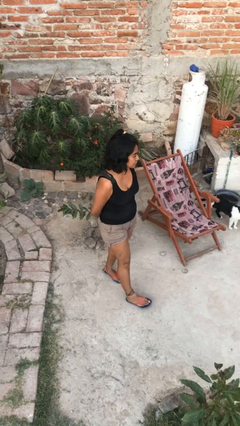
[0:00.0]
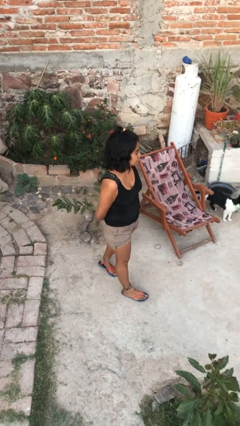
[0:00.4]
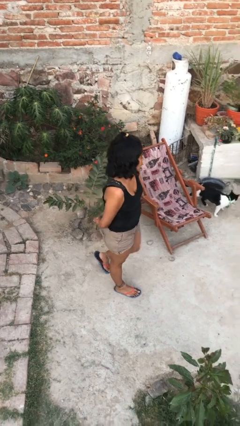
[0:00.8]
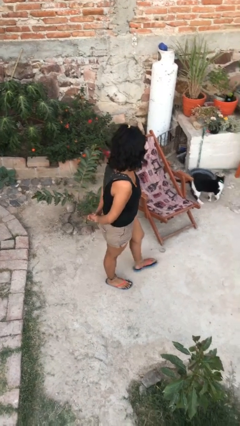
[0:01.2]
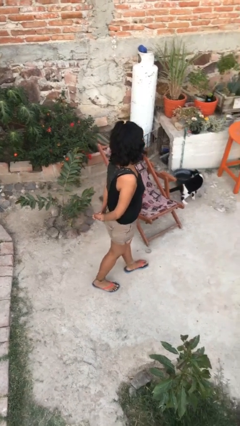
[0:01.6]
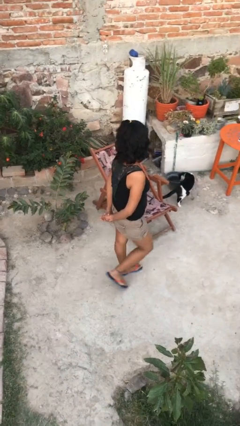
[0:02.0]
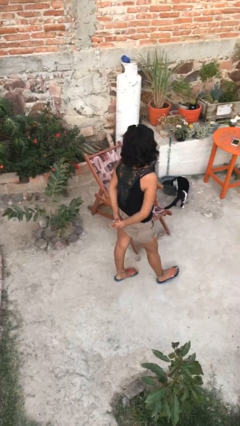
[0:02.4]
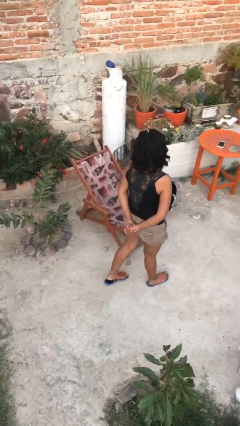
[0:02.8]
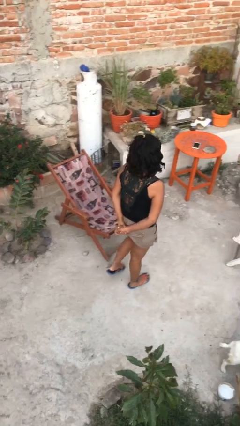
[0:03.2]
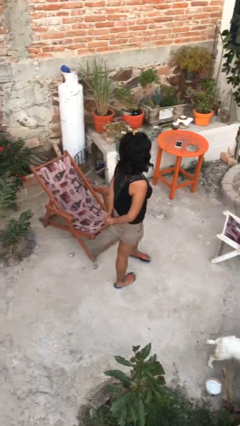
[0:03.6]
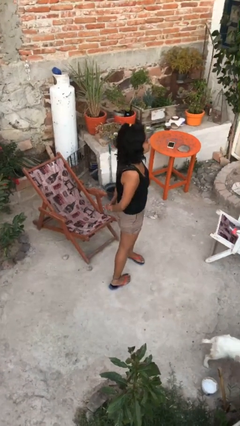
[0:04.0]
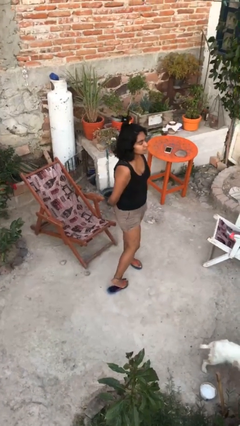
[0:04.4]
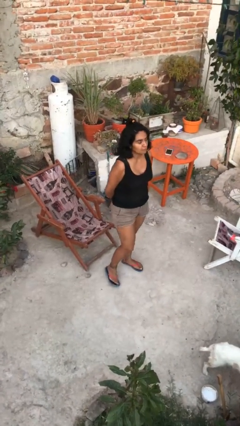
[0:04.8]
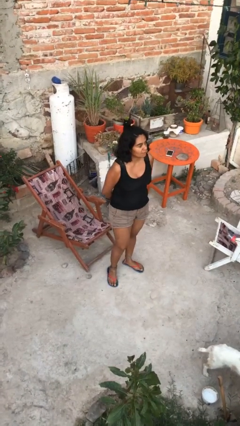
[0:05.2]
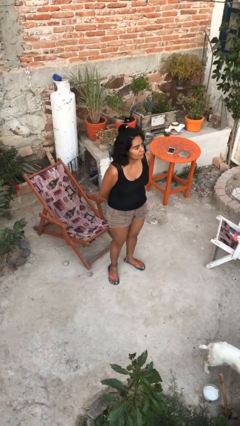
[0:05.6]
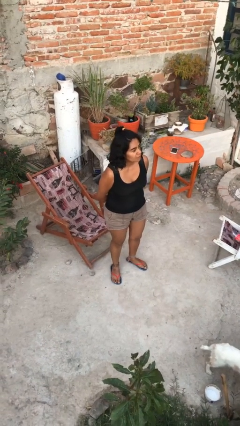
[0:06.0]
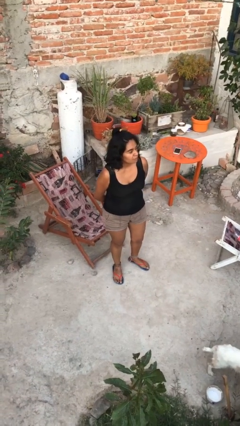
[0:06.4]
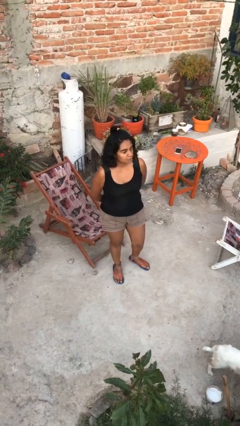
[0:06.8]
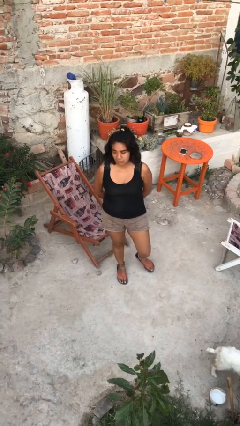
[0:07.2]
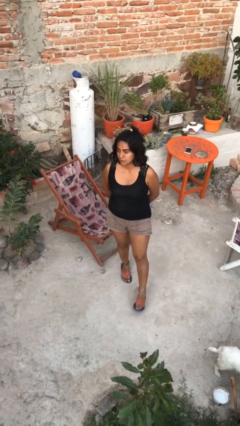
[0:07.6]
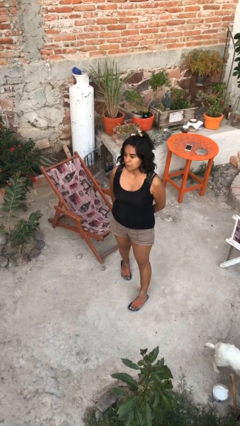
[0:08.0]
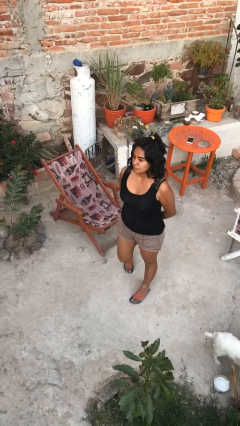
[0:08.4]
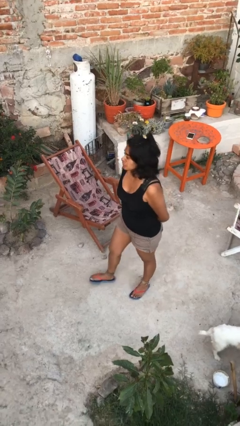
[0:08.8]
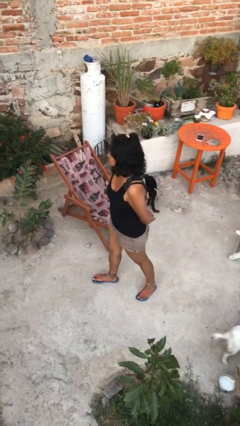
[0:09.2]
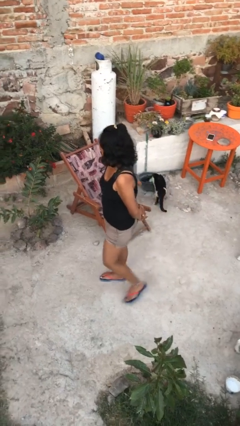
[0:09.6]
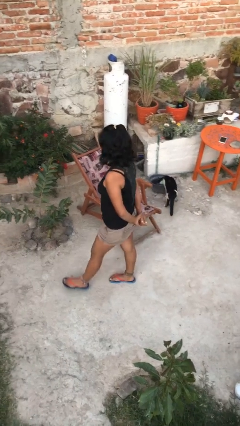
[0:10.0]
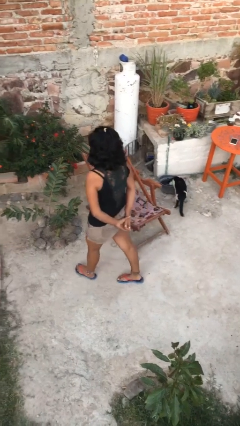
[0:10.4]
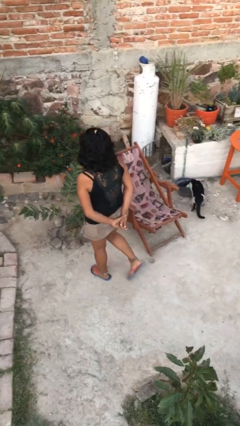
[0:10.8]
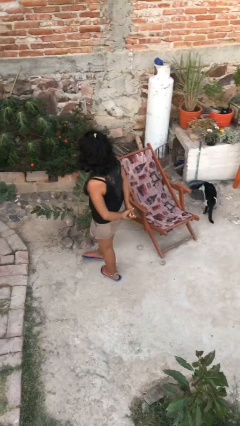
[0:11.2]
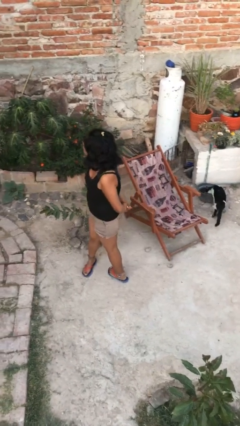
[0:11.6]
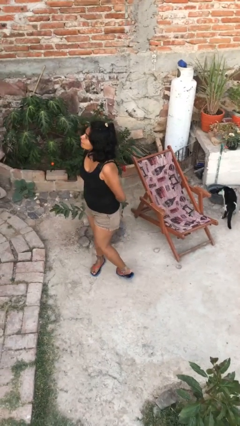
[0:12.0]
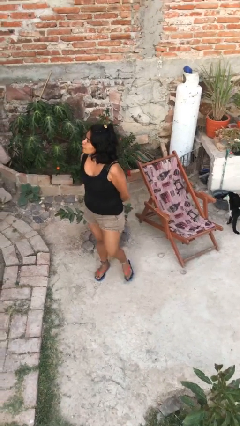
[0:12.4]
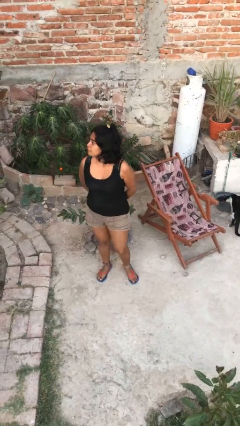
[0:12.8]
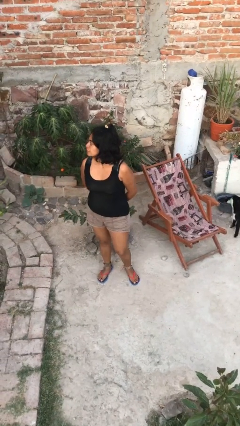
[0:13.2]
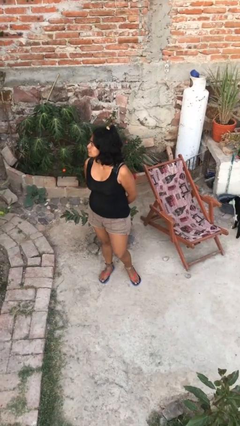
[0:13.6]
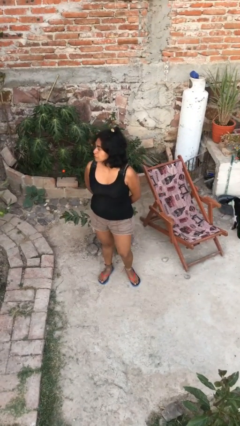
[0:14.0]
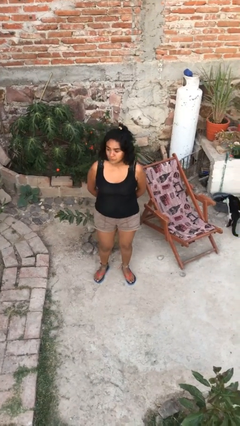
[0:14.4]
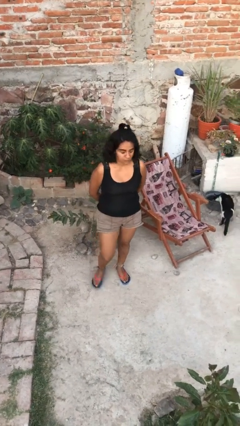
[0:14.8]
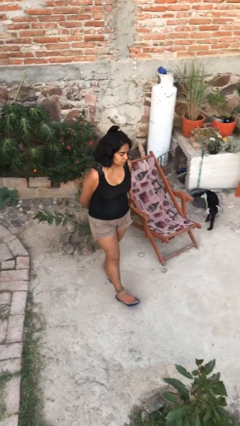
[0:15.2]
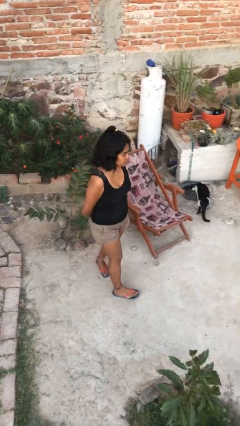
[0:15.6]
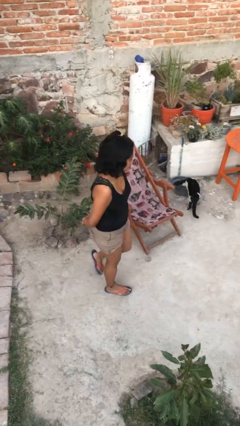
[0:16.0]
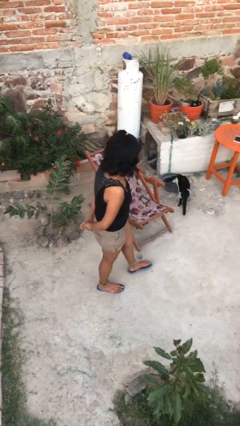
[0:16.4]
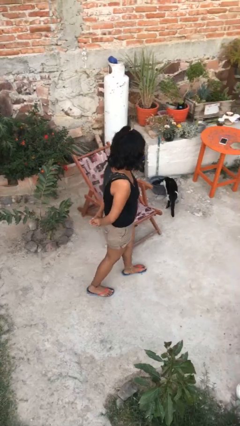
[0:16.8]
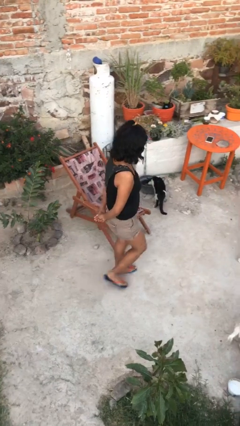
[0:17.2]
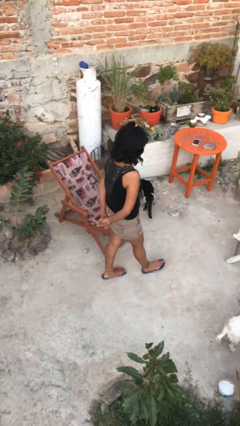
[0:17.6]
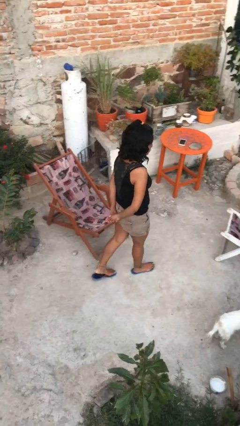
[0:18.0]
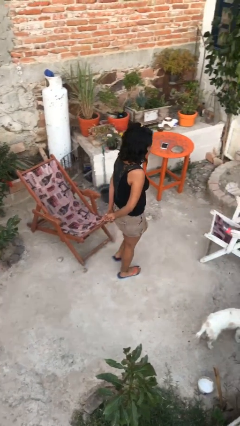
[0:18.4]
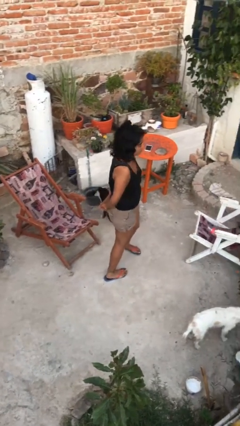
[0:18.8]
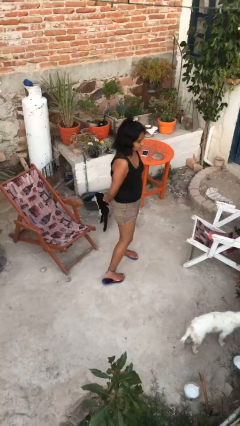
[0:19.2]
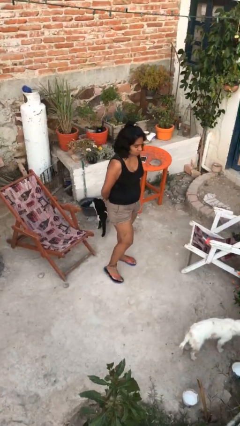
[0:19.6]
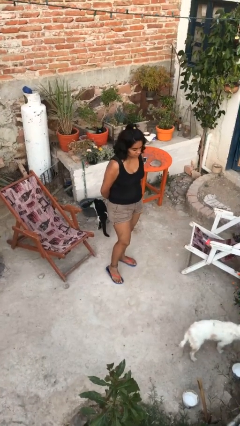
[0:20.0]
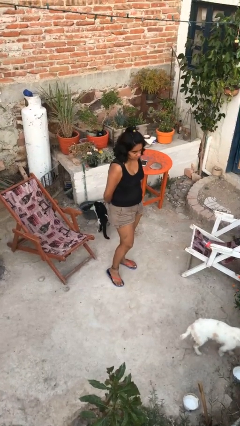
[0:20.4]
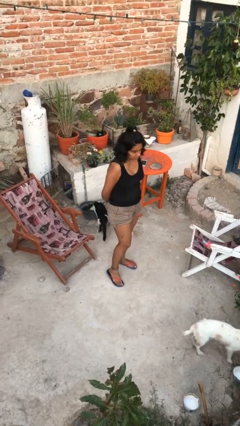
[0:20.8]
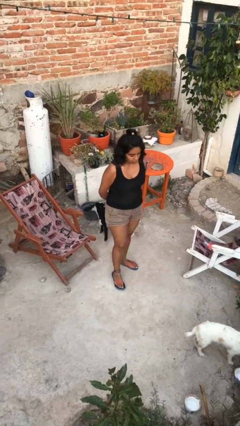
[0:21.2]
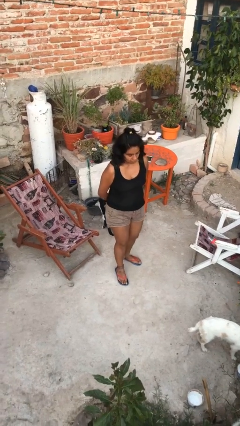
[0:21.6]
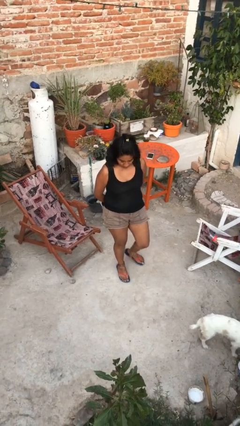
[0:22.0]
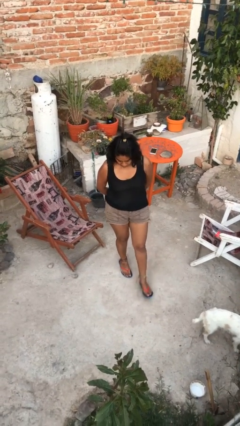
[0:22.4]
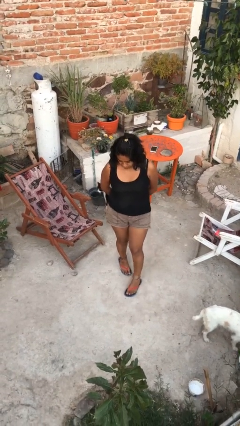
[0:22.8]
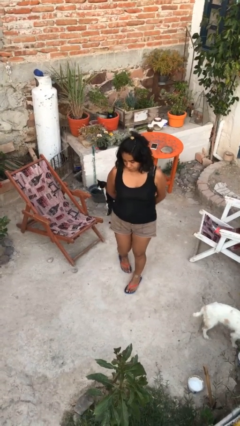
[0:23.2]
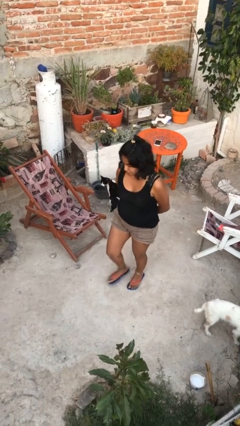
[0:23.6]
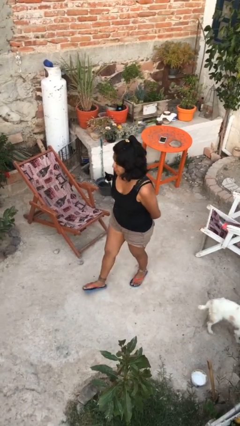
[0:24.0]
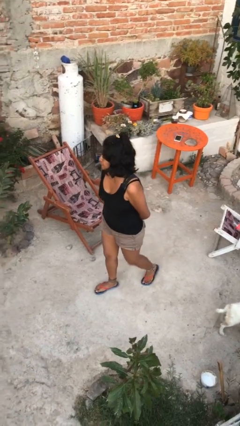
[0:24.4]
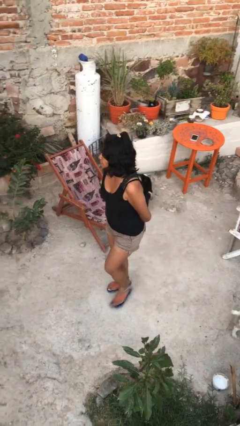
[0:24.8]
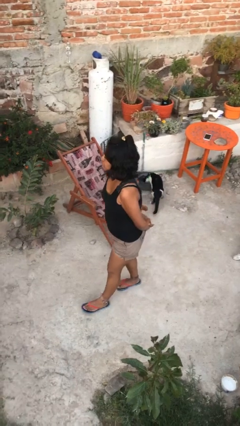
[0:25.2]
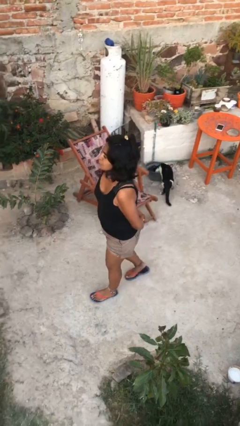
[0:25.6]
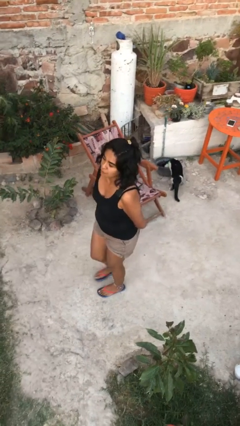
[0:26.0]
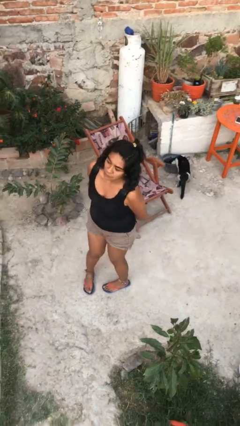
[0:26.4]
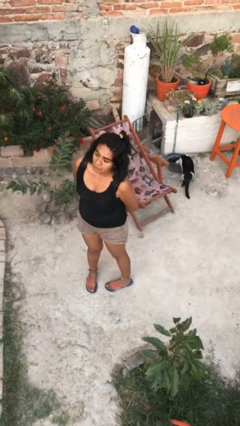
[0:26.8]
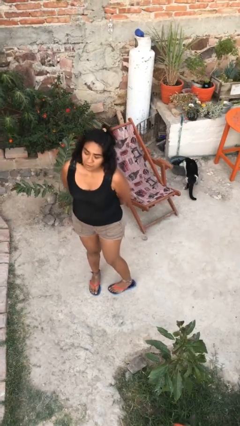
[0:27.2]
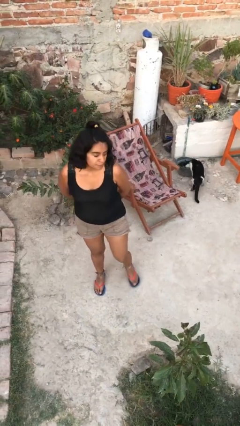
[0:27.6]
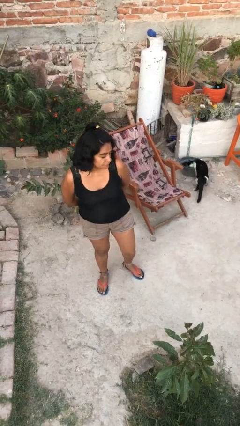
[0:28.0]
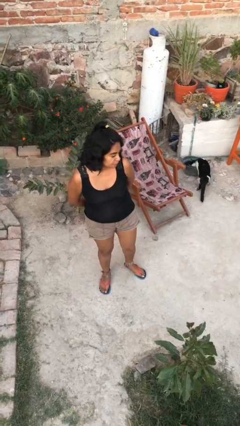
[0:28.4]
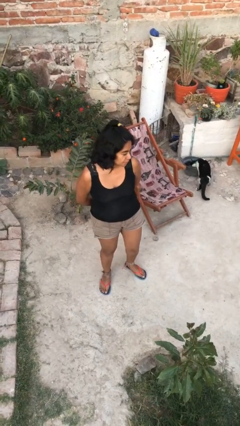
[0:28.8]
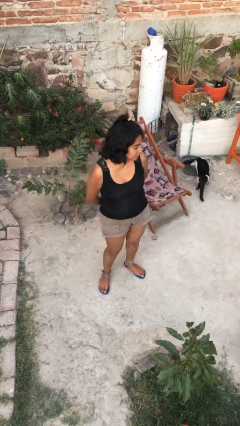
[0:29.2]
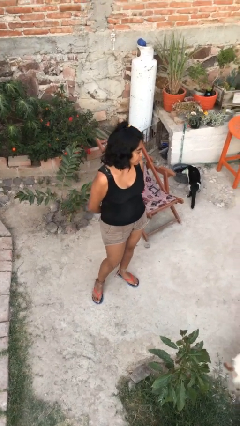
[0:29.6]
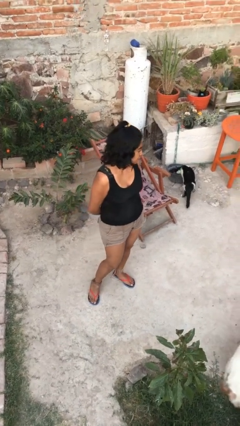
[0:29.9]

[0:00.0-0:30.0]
person walks

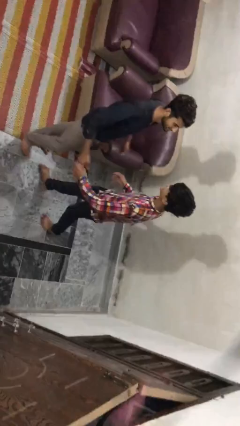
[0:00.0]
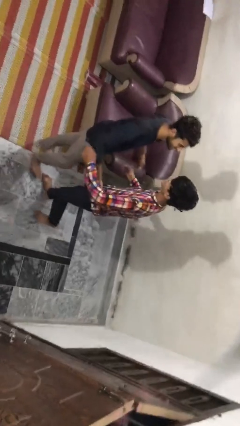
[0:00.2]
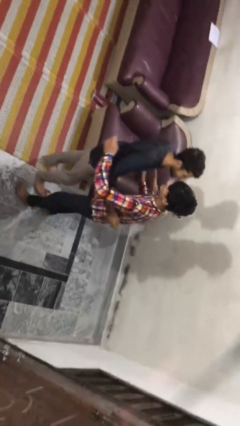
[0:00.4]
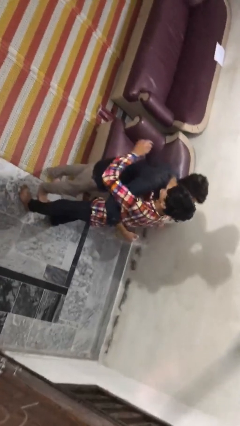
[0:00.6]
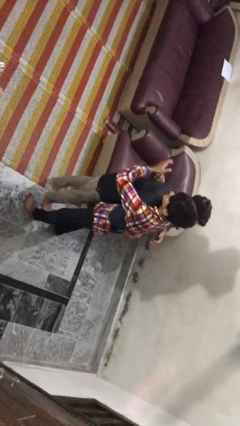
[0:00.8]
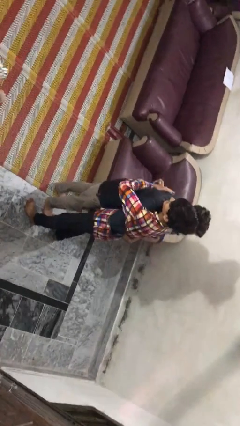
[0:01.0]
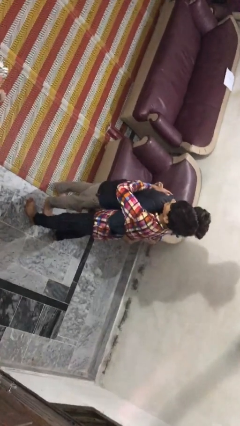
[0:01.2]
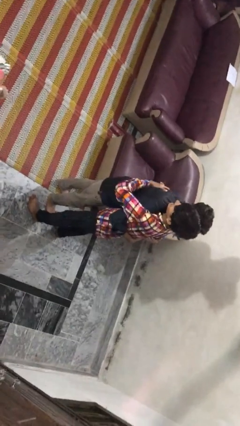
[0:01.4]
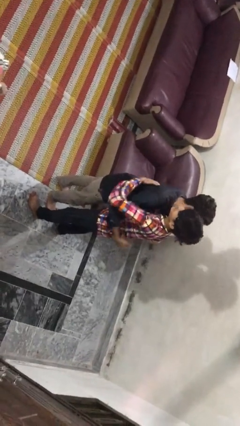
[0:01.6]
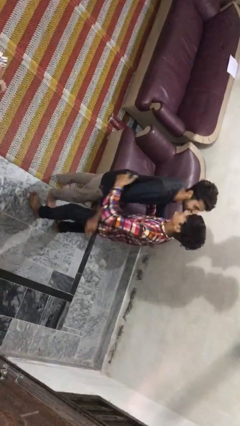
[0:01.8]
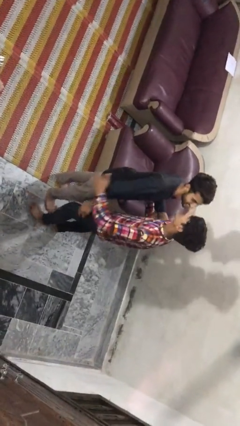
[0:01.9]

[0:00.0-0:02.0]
person embraces person

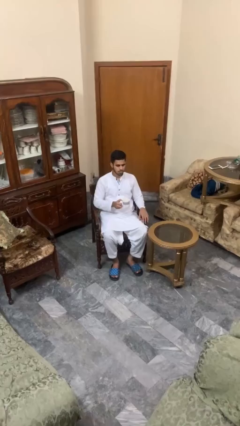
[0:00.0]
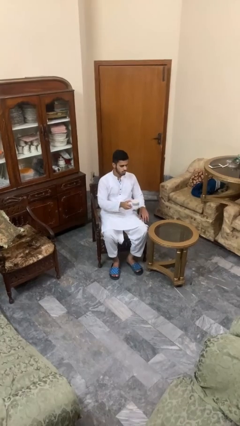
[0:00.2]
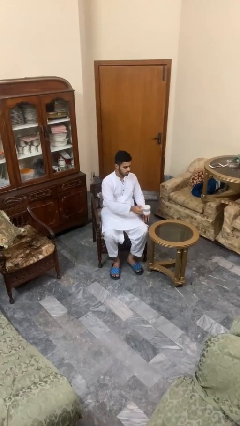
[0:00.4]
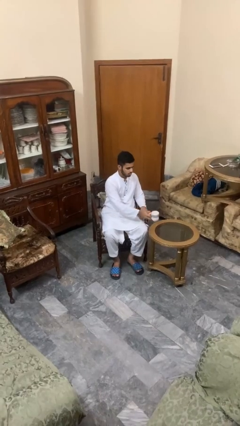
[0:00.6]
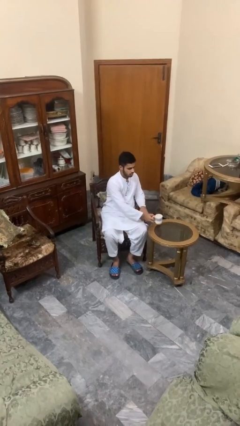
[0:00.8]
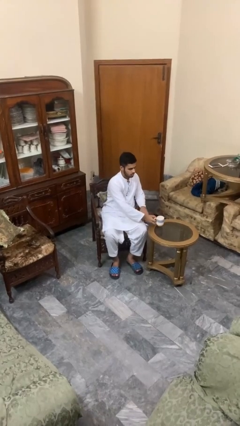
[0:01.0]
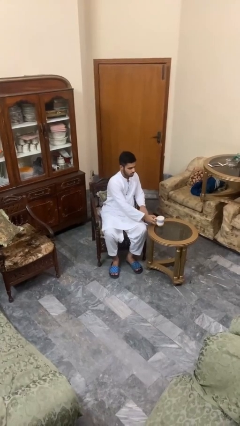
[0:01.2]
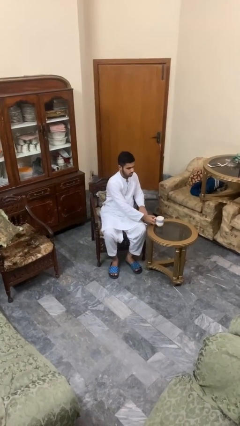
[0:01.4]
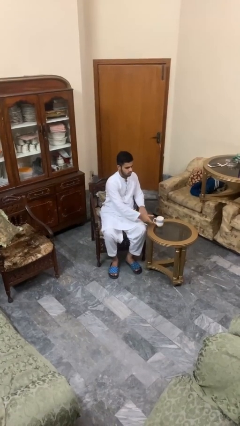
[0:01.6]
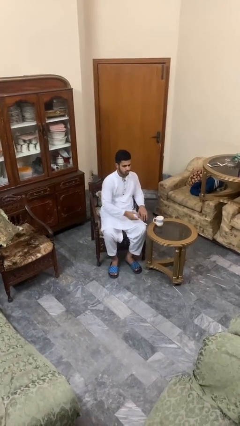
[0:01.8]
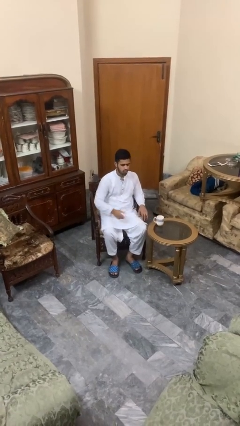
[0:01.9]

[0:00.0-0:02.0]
person puts down object on table
